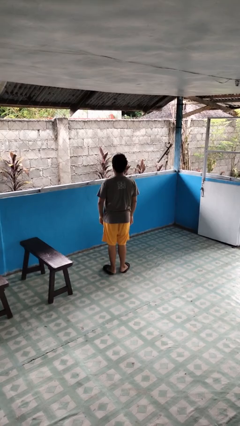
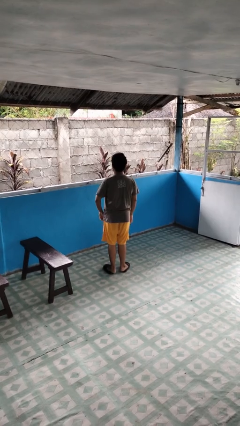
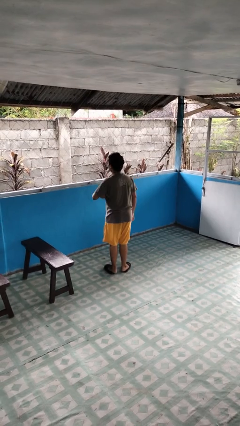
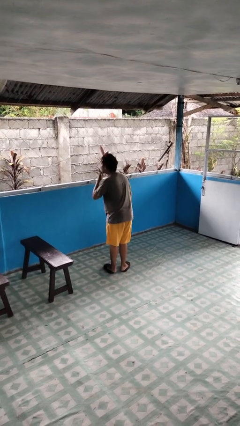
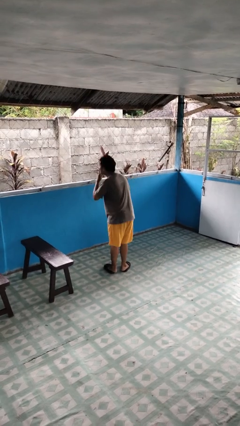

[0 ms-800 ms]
person gestures be quiet

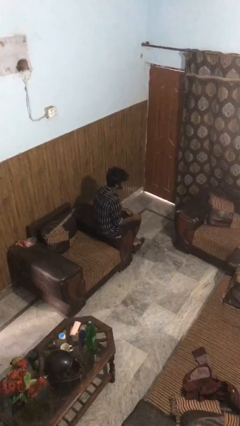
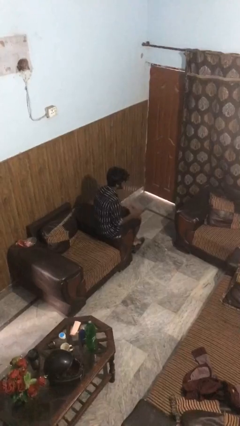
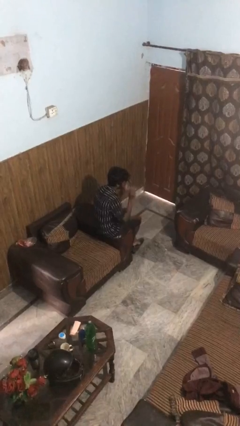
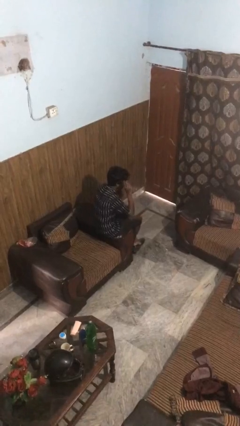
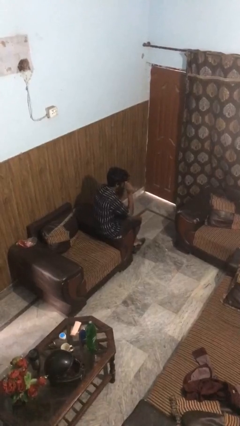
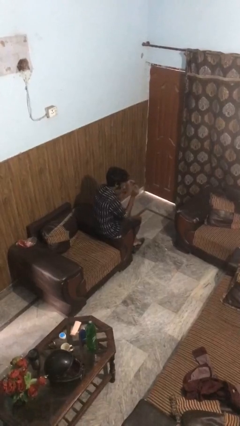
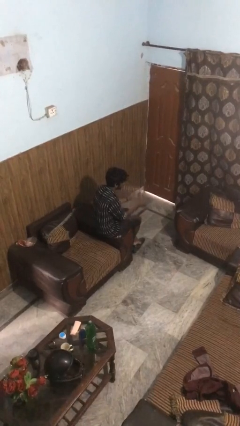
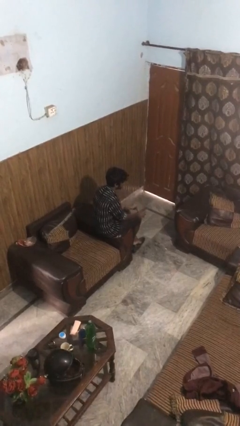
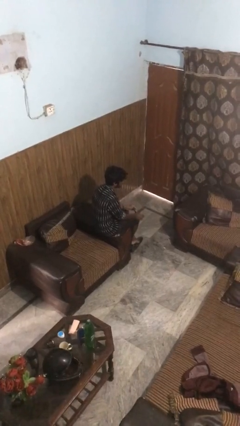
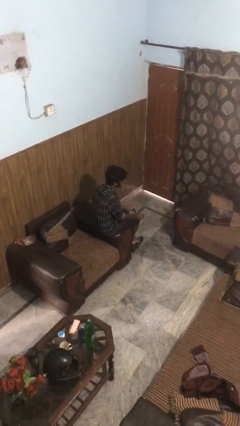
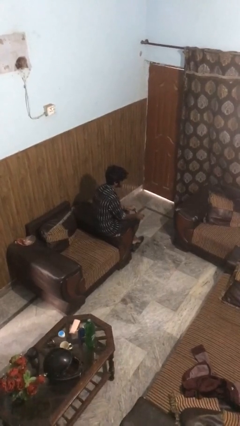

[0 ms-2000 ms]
person takes off sunglasses

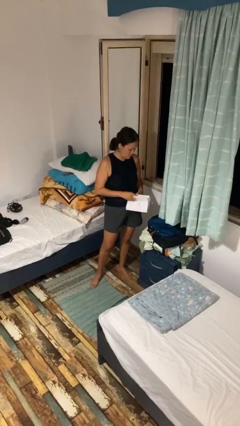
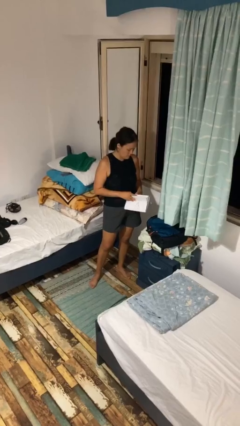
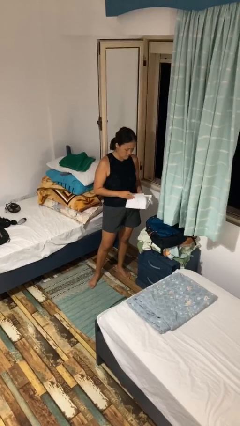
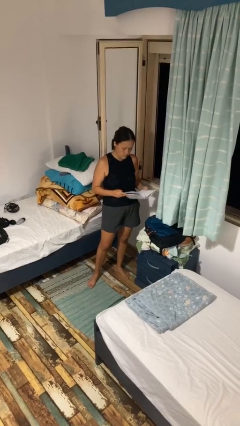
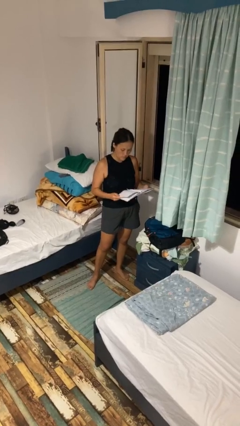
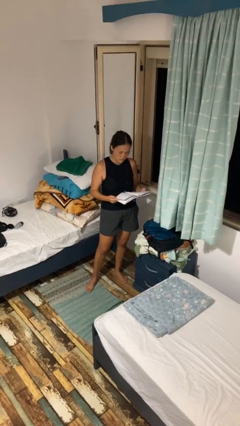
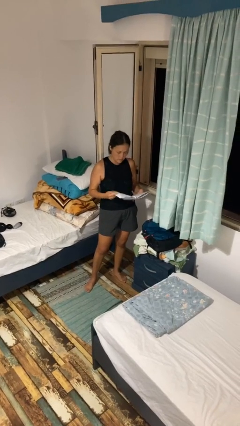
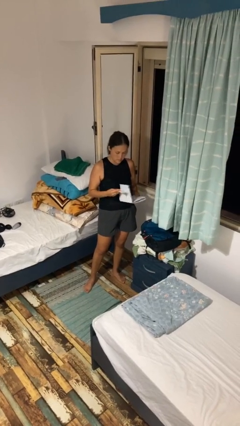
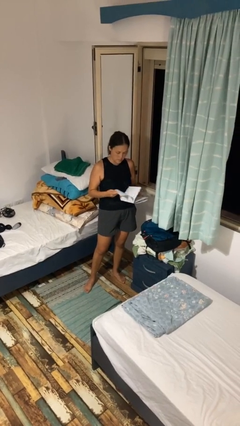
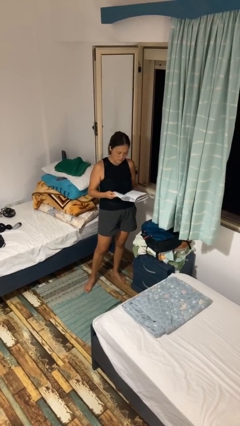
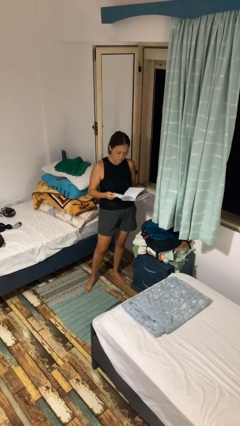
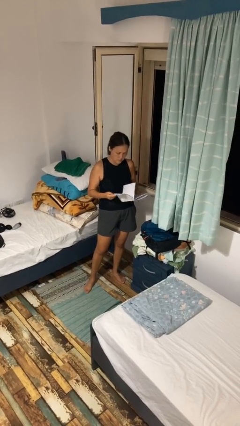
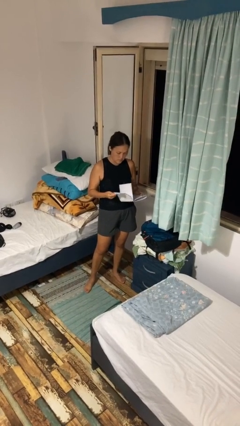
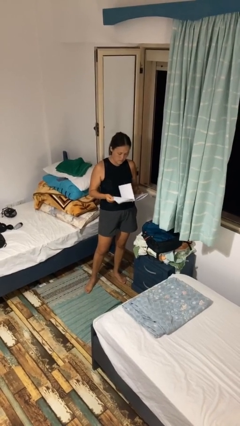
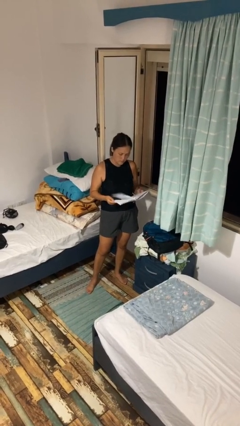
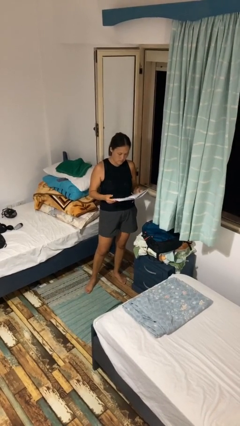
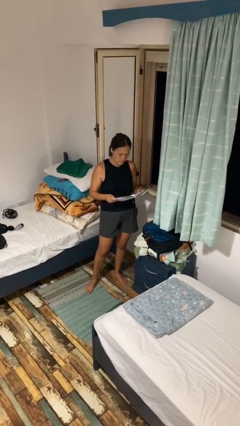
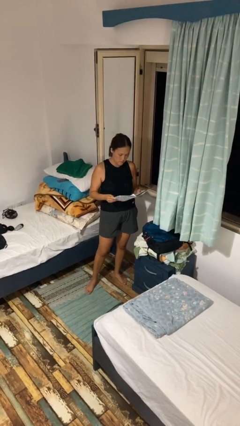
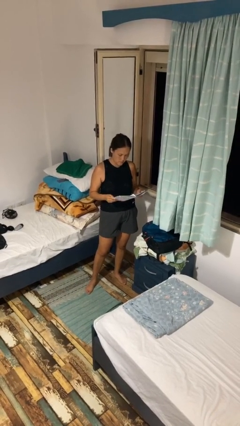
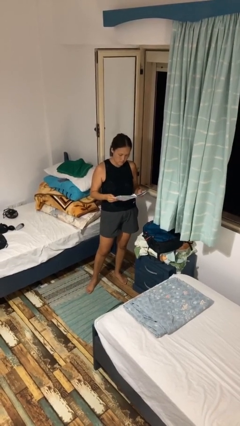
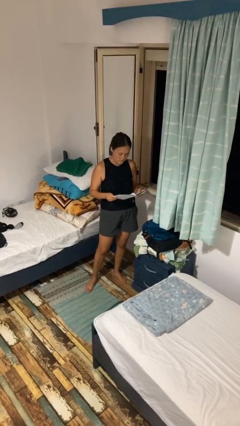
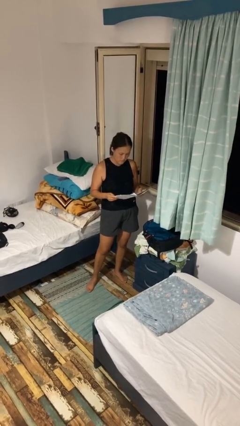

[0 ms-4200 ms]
person reads book

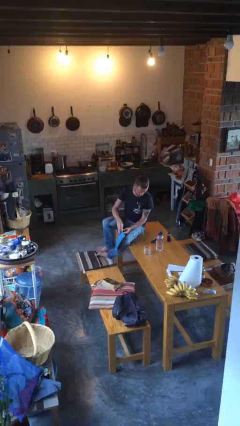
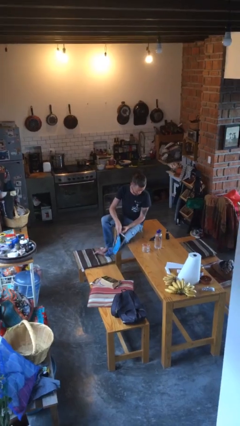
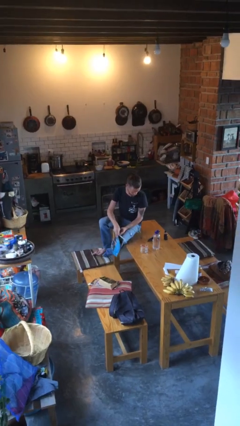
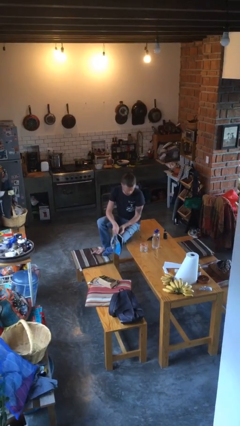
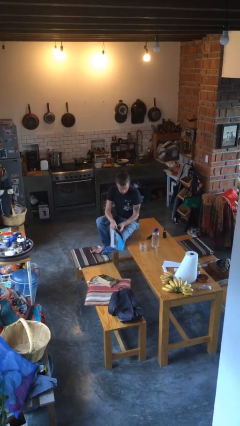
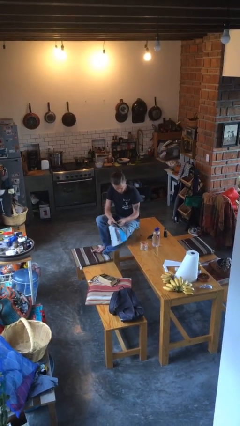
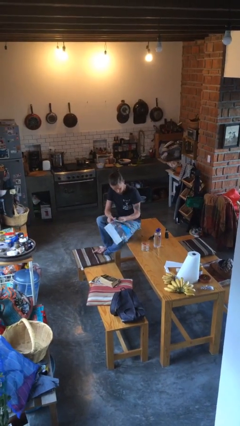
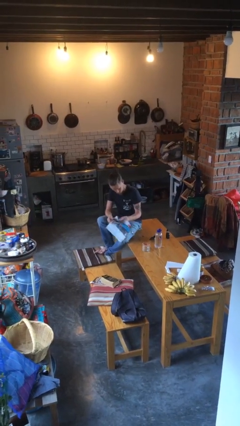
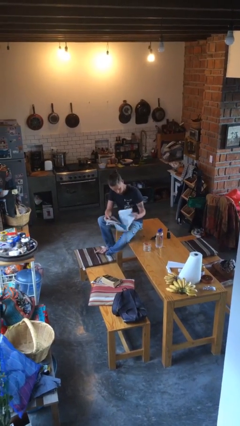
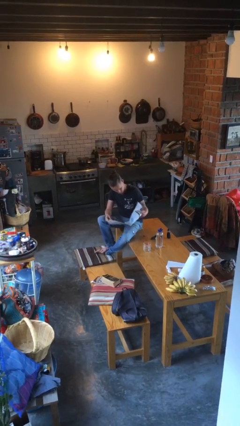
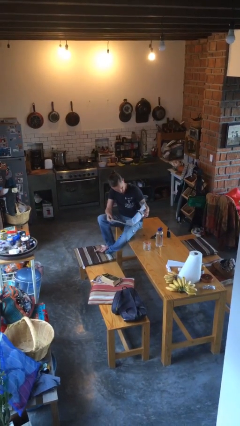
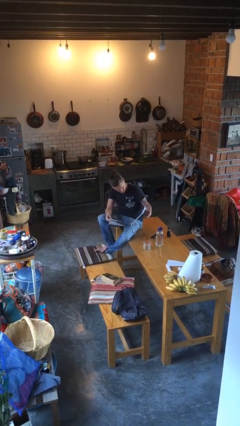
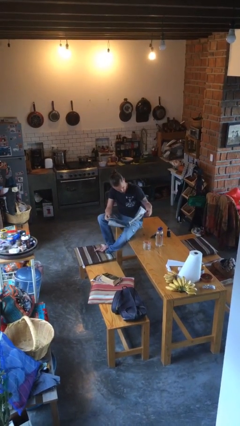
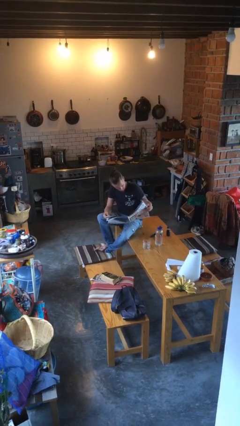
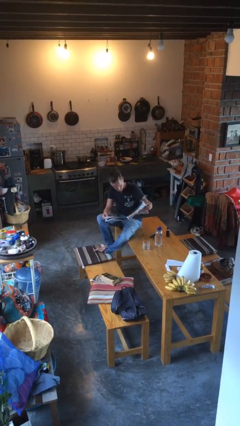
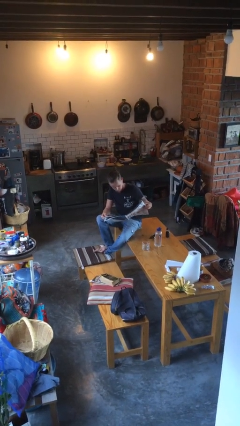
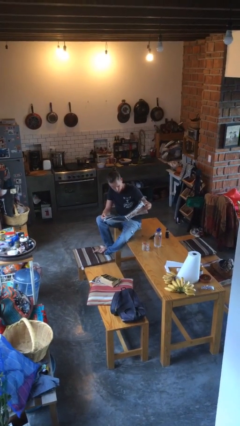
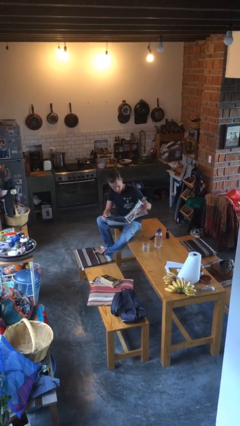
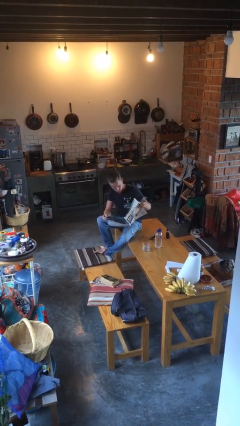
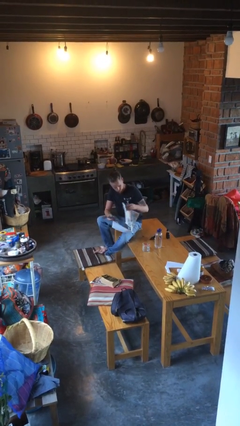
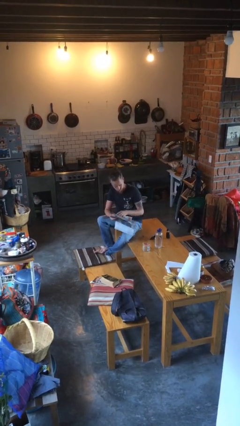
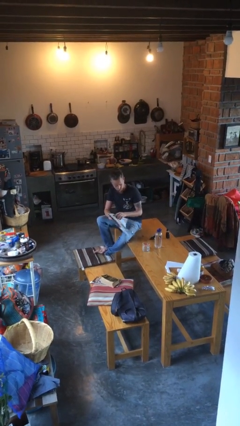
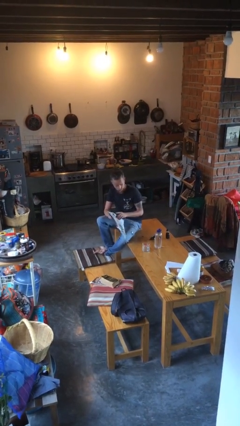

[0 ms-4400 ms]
person reads newspaper

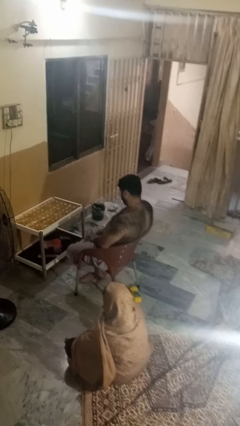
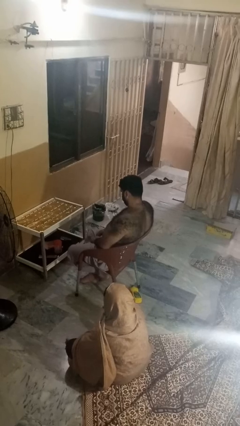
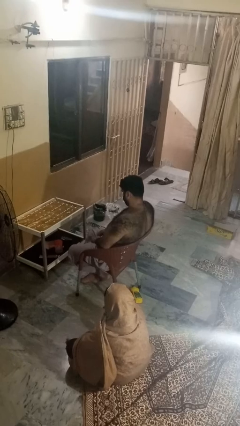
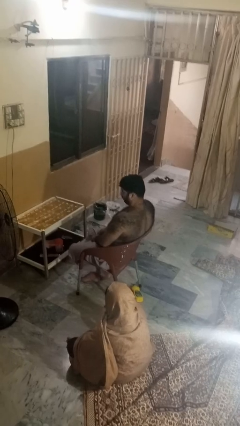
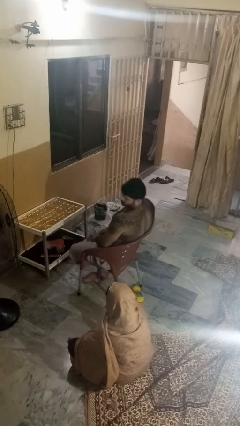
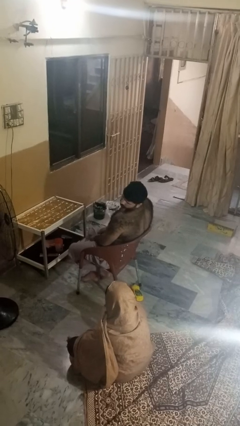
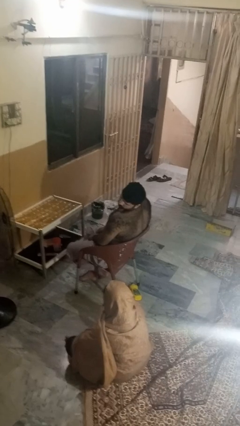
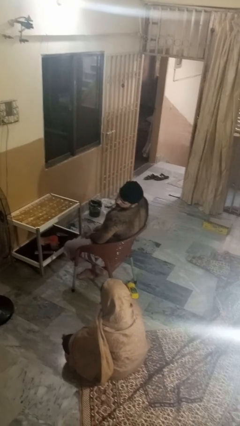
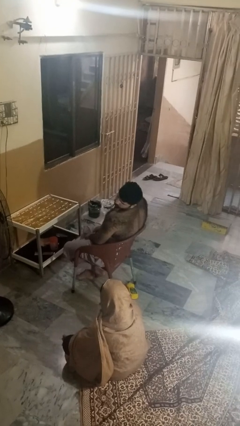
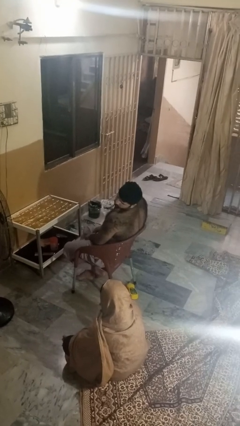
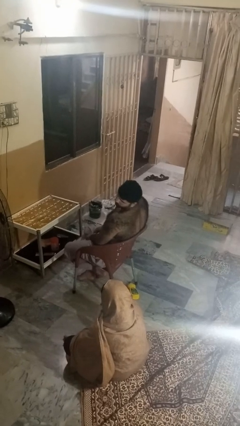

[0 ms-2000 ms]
person looks over shoulder

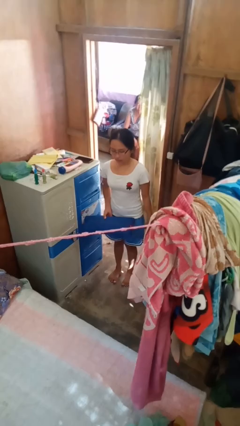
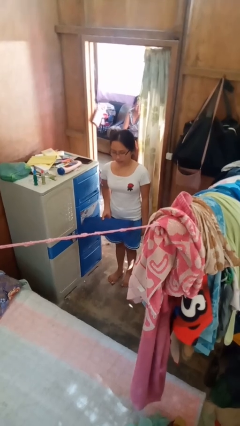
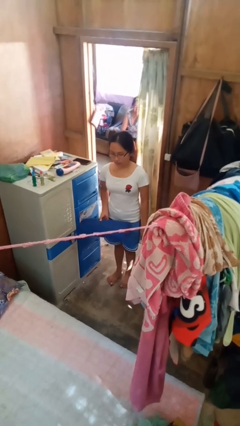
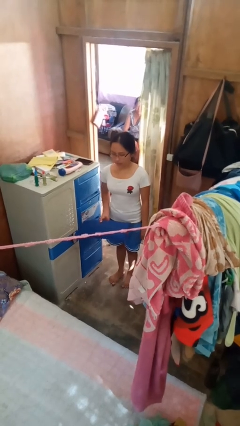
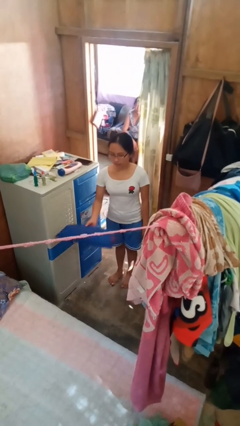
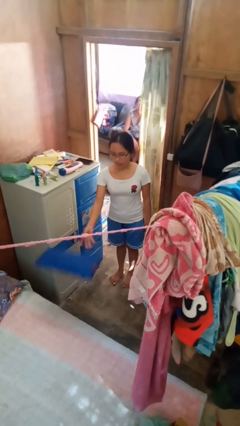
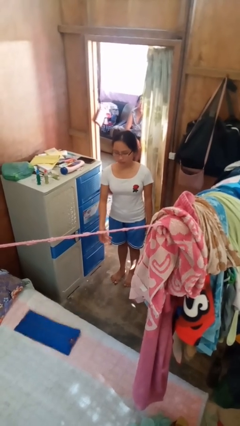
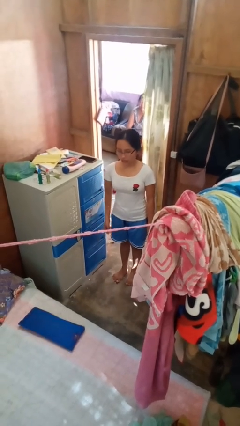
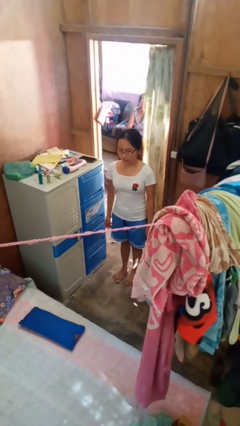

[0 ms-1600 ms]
person throws object on bed

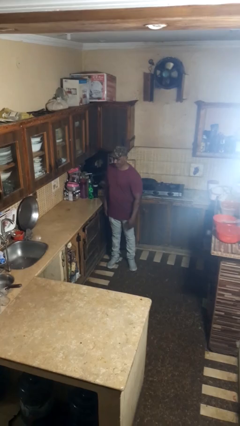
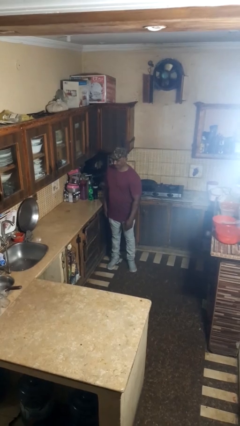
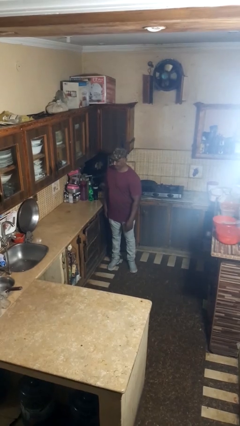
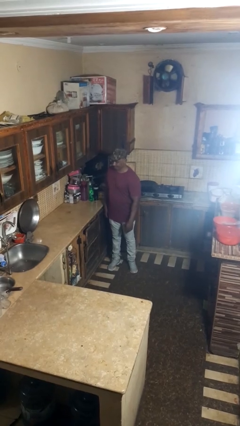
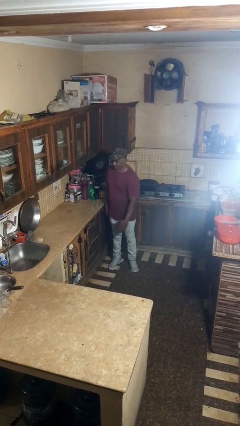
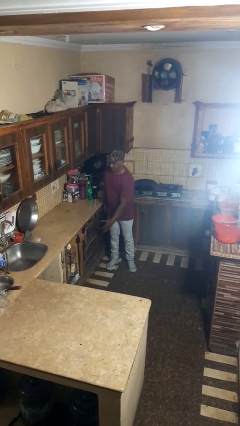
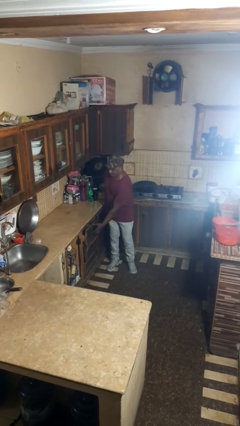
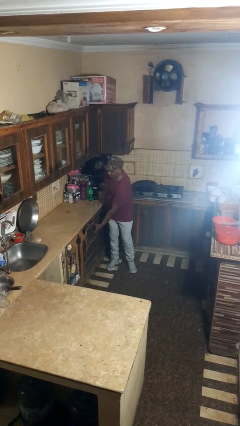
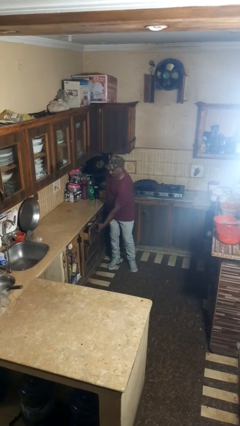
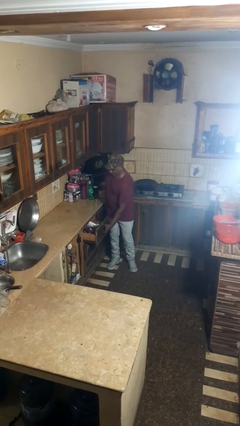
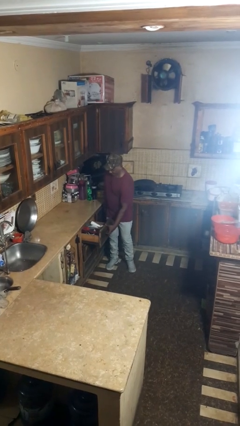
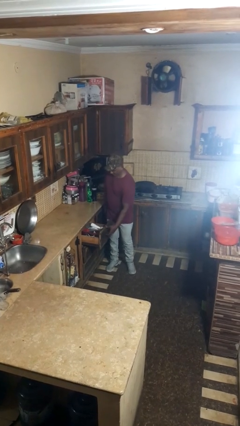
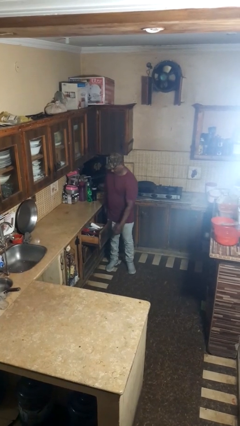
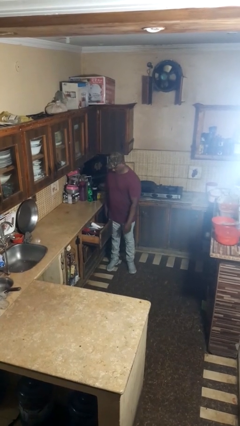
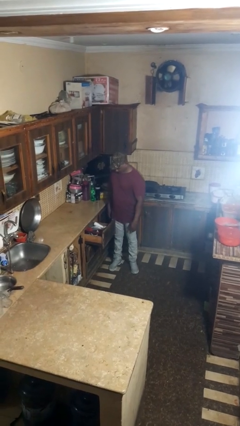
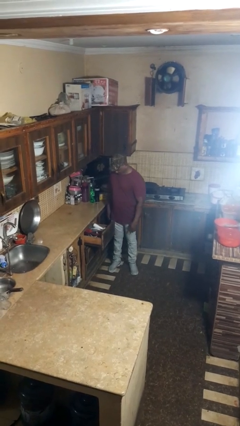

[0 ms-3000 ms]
person opens kitchen drawer
